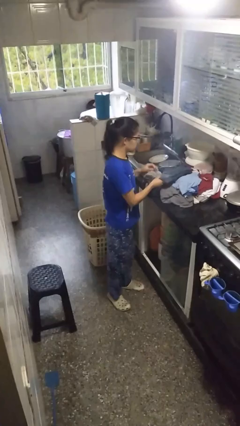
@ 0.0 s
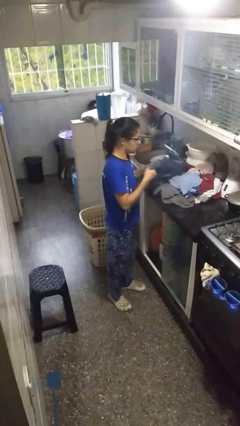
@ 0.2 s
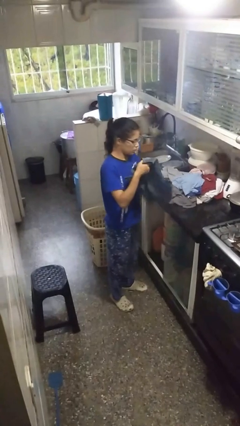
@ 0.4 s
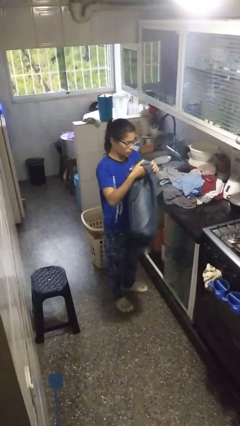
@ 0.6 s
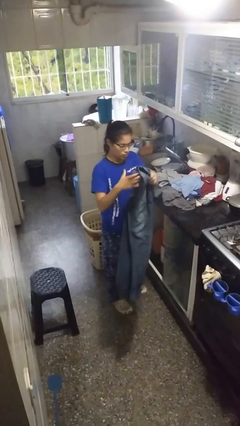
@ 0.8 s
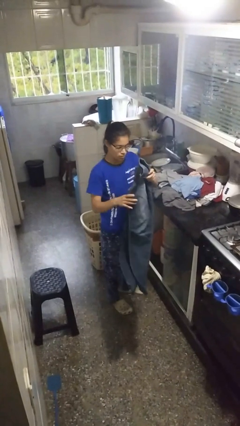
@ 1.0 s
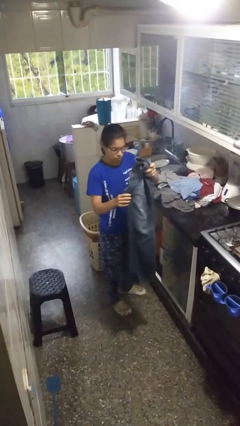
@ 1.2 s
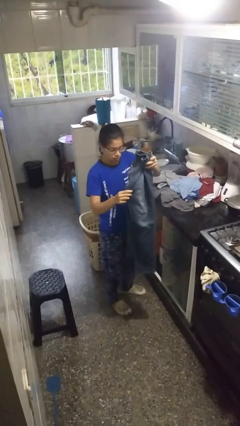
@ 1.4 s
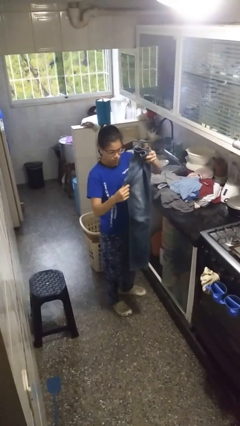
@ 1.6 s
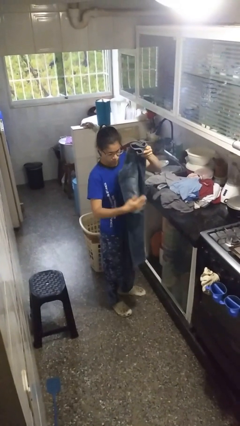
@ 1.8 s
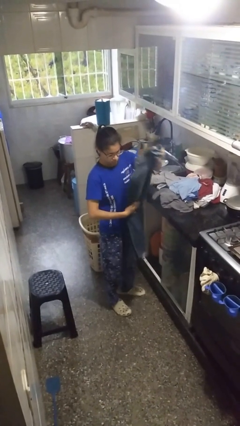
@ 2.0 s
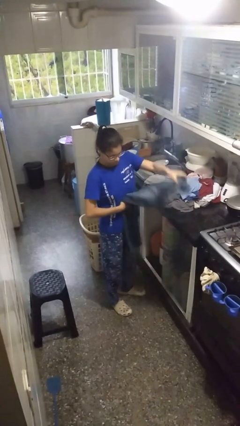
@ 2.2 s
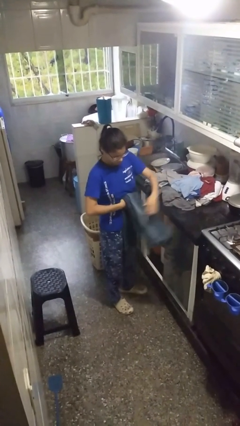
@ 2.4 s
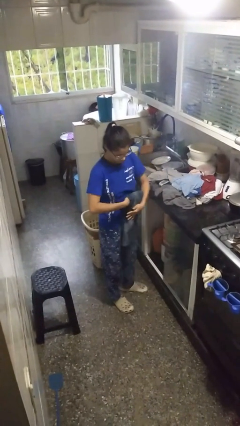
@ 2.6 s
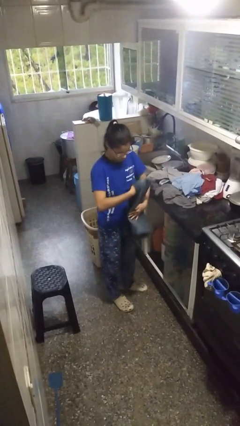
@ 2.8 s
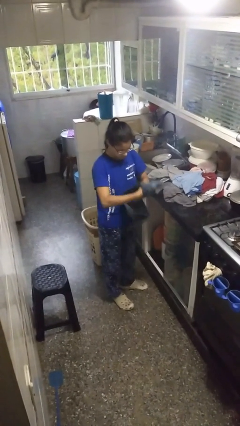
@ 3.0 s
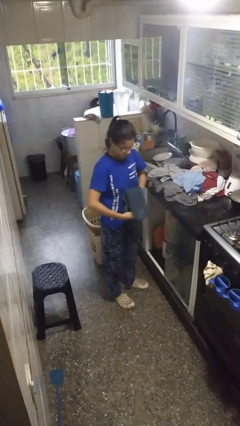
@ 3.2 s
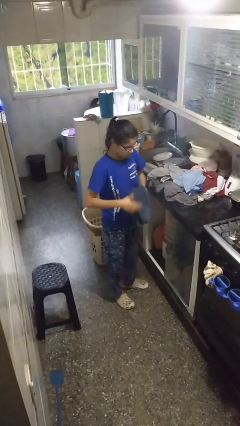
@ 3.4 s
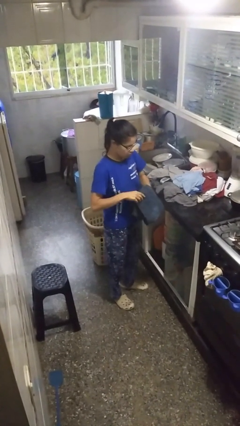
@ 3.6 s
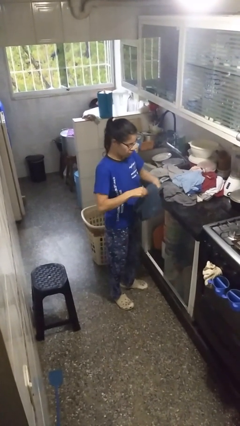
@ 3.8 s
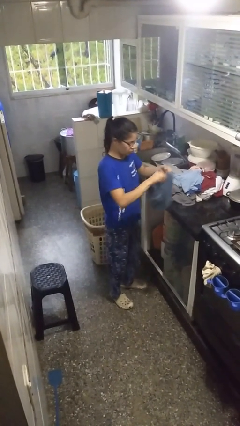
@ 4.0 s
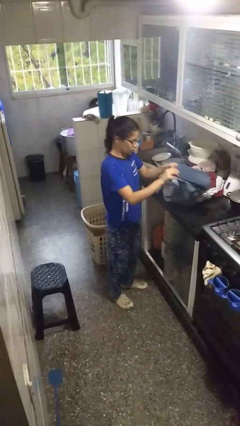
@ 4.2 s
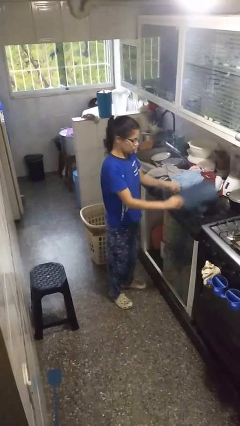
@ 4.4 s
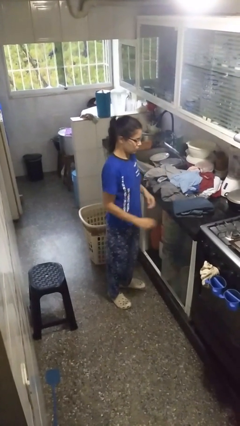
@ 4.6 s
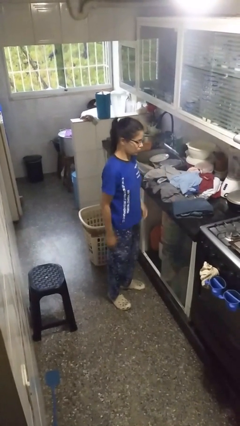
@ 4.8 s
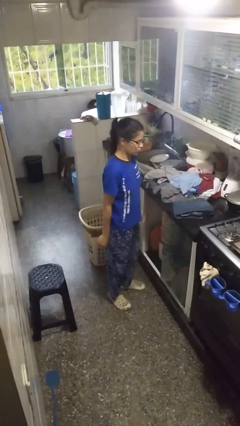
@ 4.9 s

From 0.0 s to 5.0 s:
person folds pants

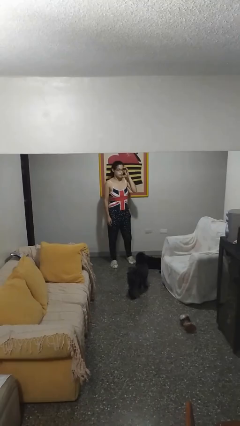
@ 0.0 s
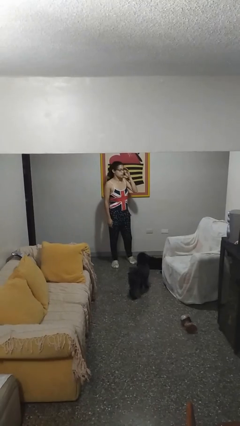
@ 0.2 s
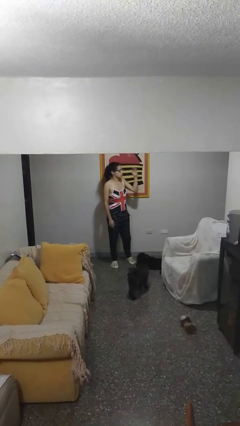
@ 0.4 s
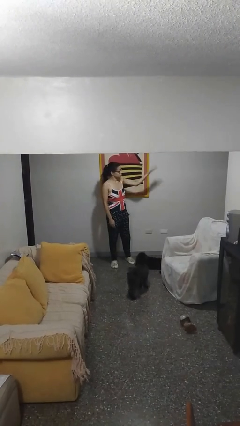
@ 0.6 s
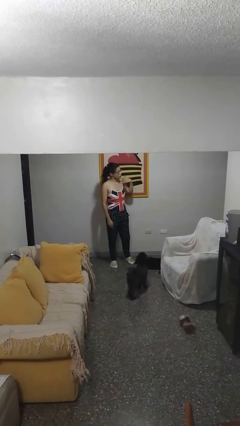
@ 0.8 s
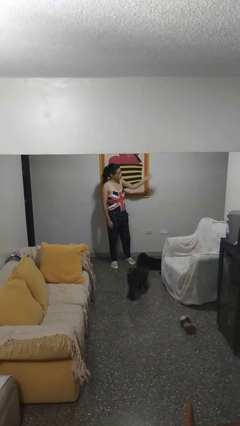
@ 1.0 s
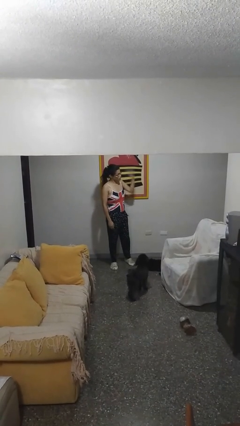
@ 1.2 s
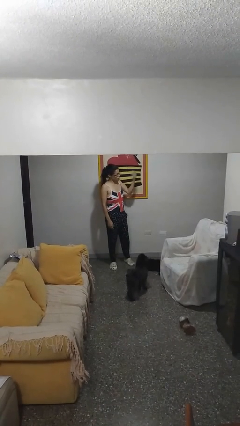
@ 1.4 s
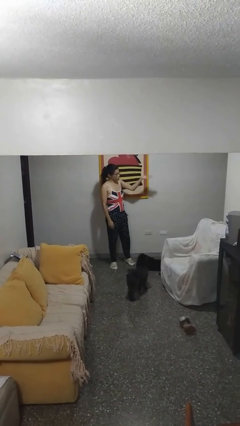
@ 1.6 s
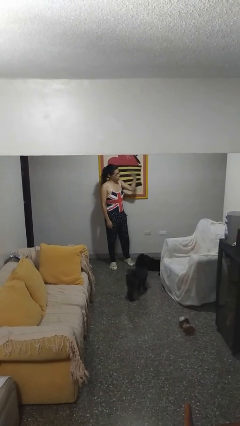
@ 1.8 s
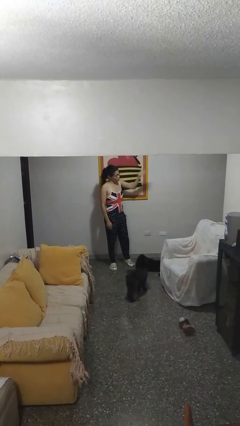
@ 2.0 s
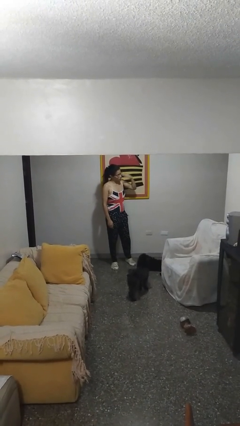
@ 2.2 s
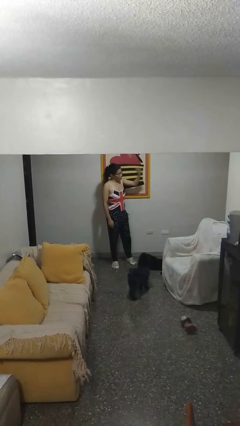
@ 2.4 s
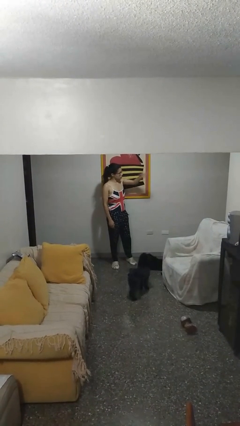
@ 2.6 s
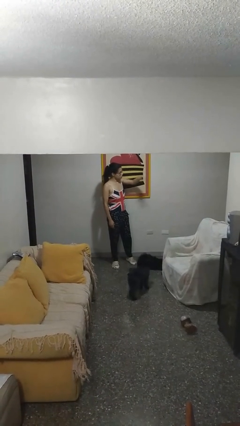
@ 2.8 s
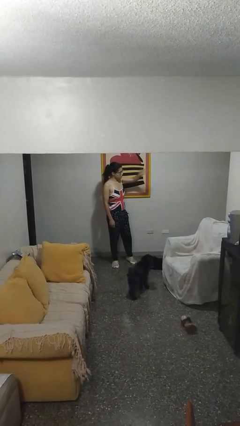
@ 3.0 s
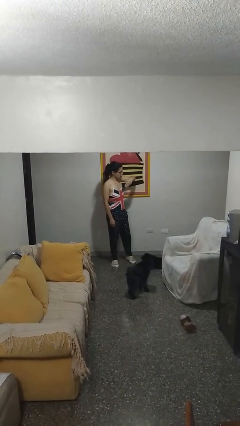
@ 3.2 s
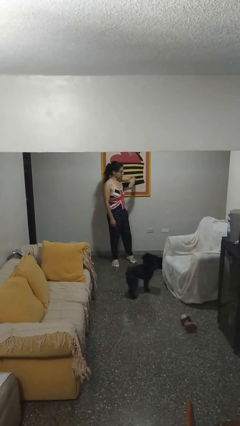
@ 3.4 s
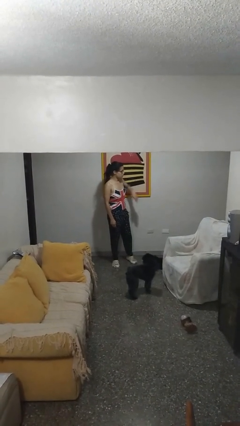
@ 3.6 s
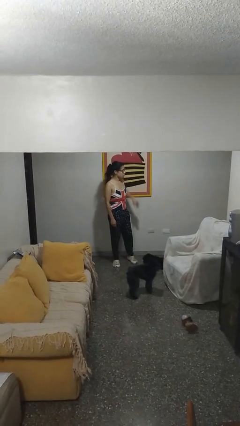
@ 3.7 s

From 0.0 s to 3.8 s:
person gestures come here

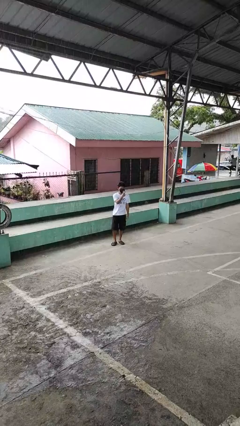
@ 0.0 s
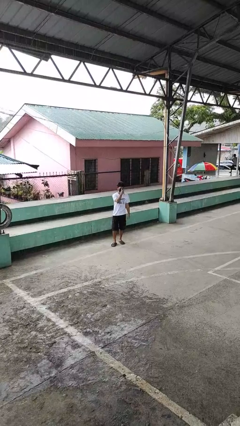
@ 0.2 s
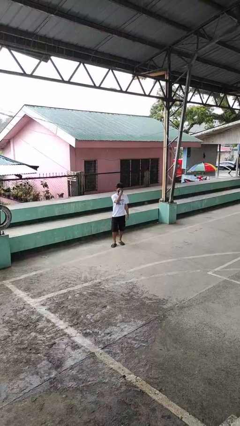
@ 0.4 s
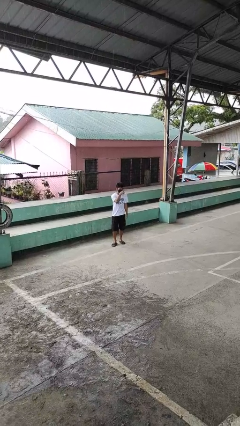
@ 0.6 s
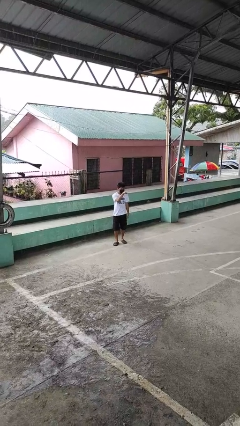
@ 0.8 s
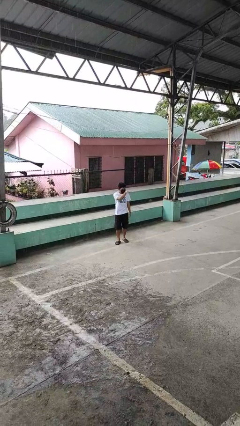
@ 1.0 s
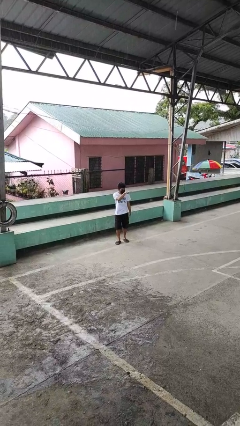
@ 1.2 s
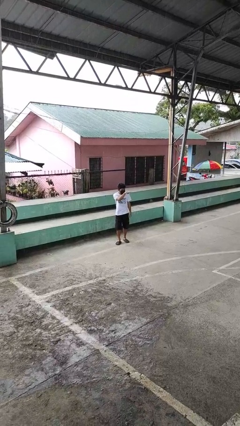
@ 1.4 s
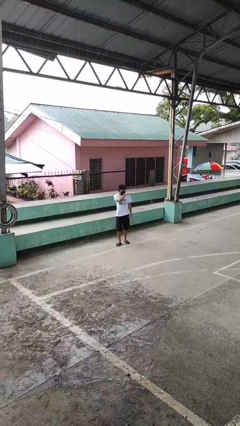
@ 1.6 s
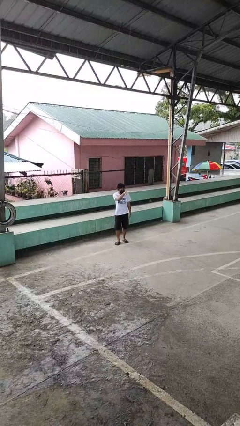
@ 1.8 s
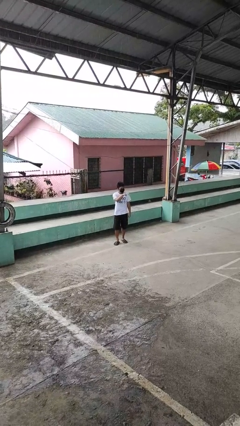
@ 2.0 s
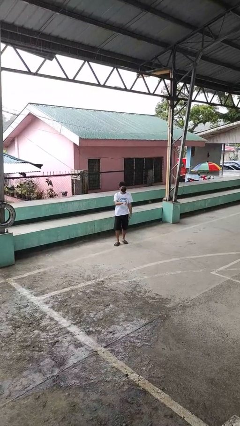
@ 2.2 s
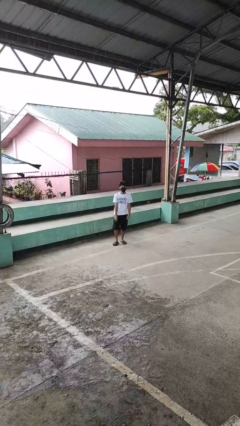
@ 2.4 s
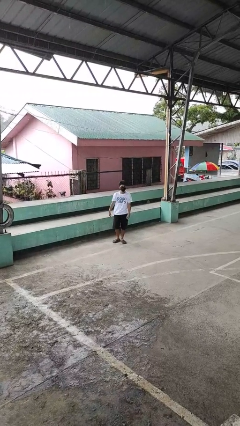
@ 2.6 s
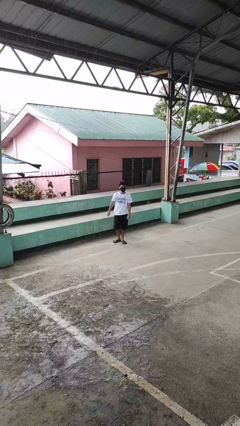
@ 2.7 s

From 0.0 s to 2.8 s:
person gestures watch closely

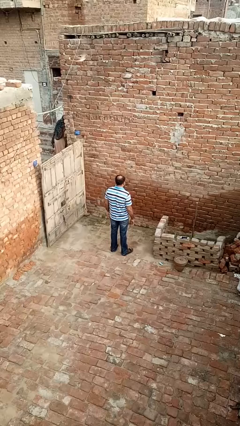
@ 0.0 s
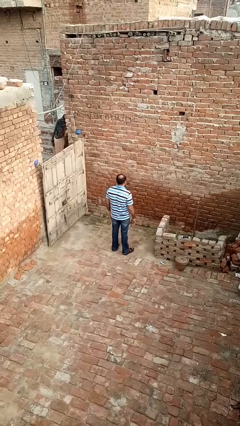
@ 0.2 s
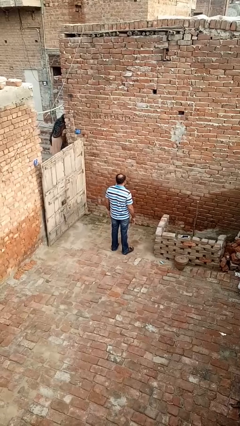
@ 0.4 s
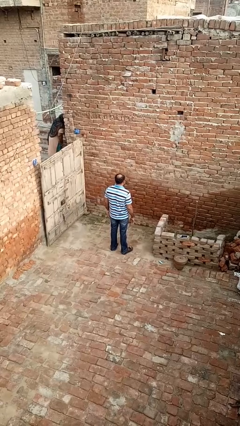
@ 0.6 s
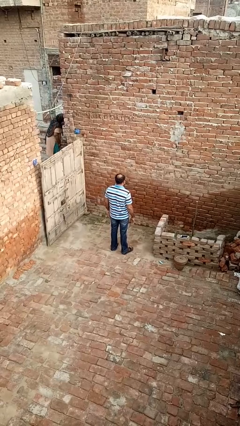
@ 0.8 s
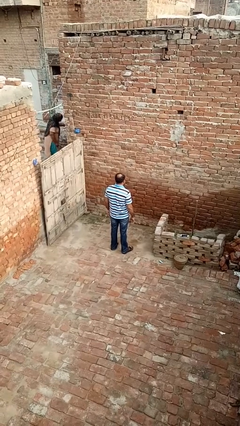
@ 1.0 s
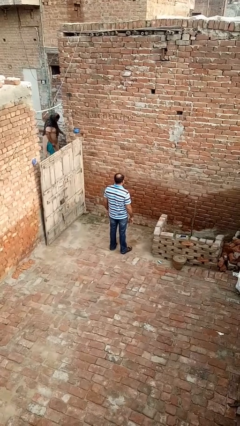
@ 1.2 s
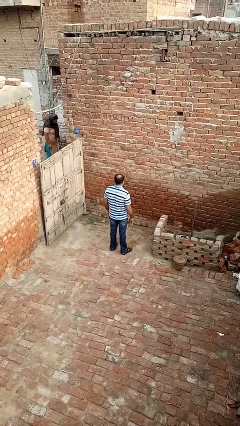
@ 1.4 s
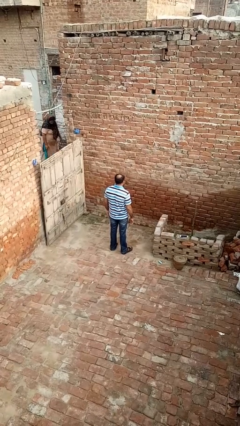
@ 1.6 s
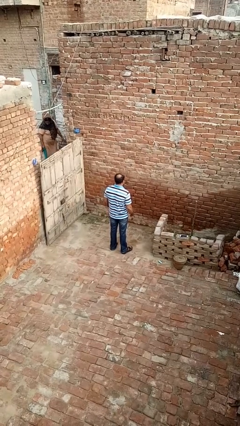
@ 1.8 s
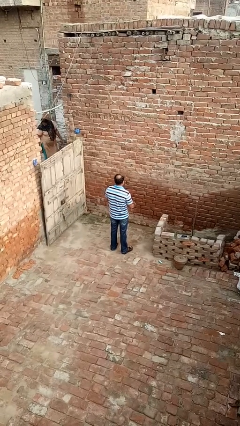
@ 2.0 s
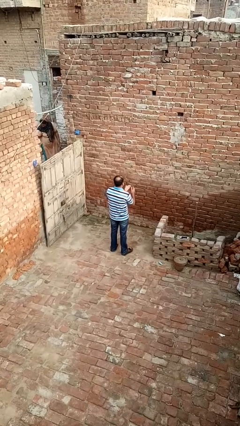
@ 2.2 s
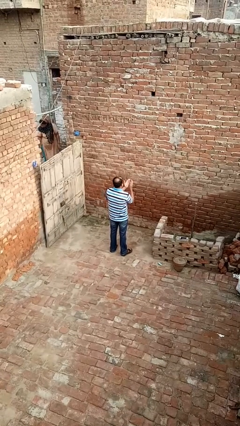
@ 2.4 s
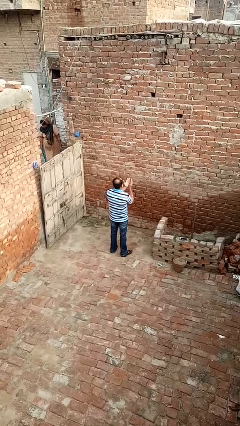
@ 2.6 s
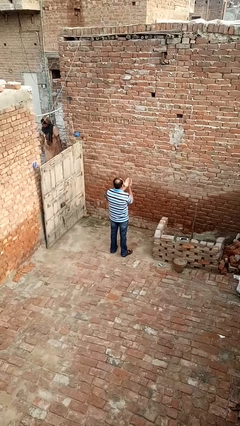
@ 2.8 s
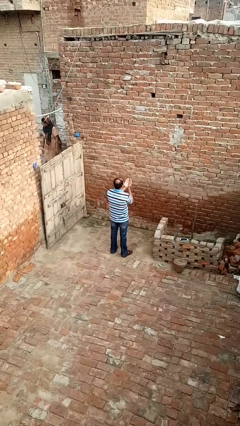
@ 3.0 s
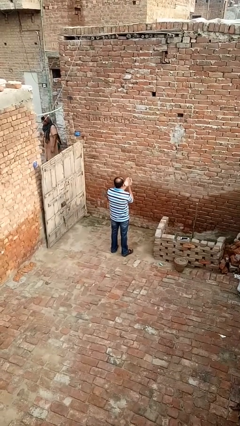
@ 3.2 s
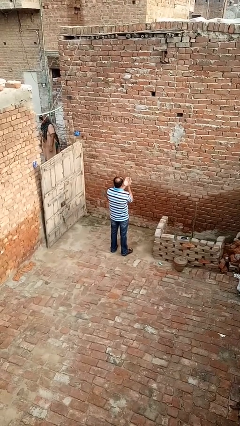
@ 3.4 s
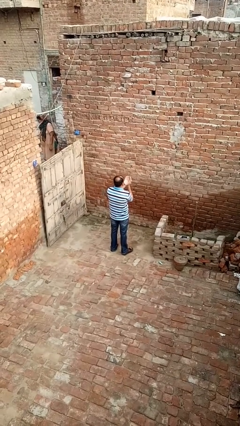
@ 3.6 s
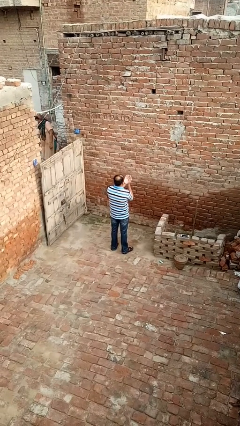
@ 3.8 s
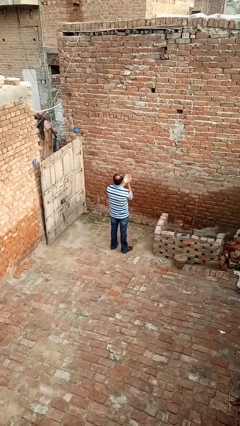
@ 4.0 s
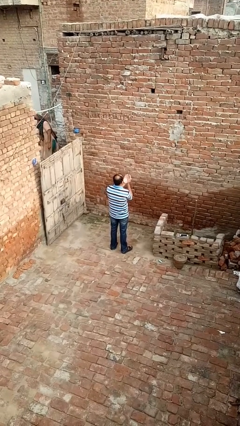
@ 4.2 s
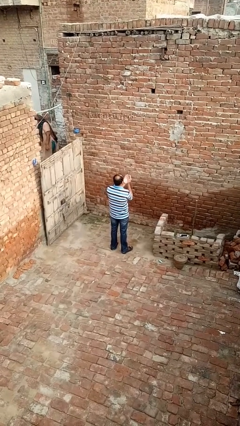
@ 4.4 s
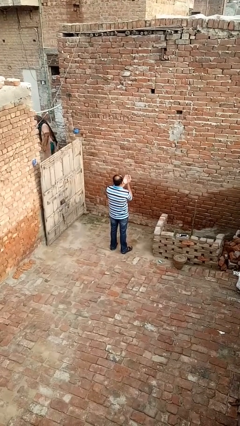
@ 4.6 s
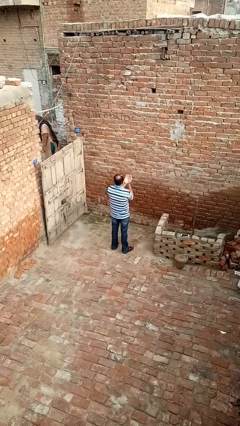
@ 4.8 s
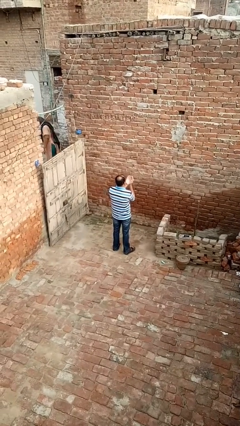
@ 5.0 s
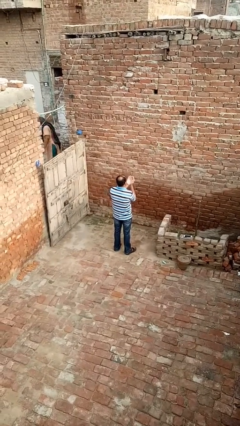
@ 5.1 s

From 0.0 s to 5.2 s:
person prays

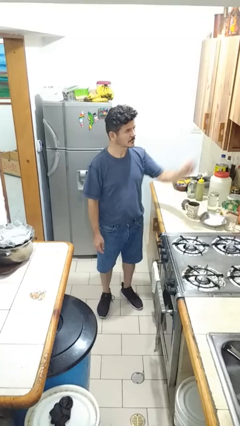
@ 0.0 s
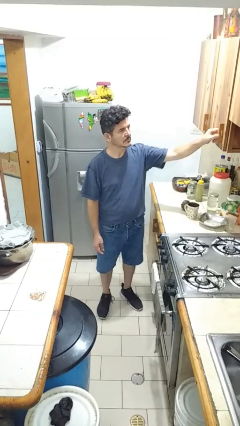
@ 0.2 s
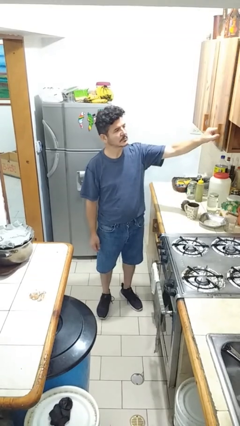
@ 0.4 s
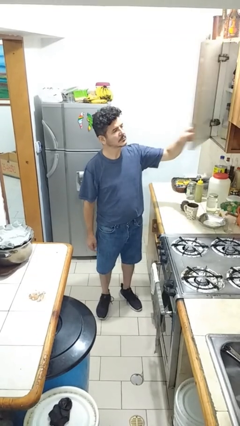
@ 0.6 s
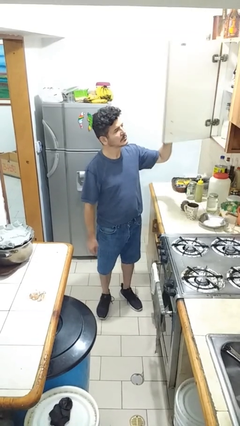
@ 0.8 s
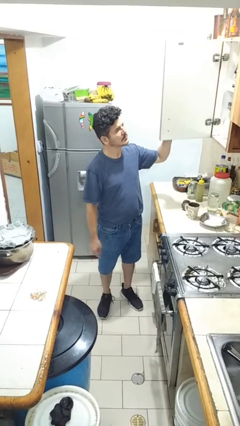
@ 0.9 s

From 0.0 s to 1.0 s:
person opens cabinet
